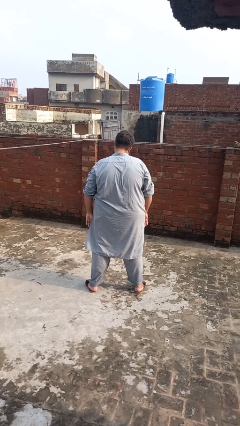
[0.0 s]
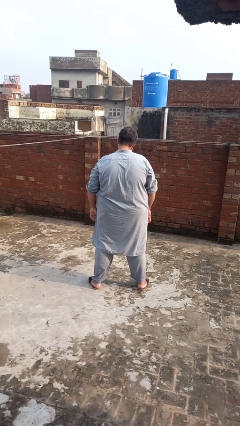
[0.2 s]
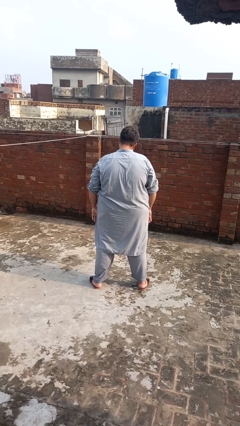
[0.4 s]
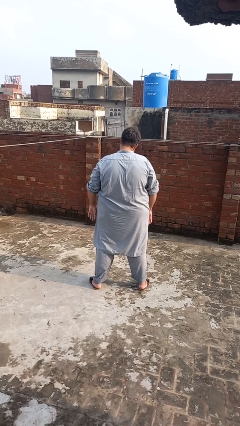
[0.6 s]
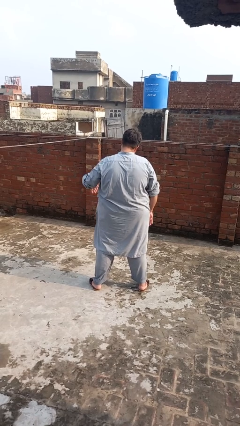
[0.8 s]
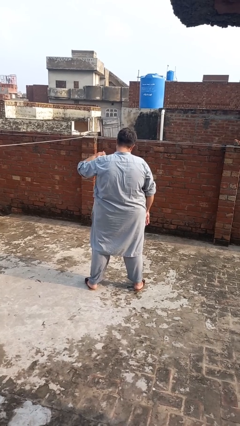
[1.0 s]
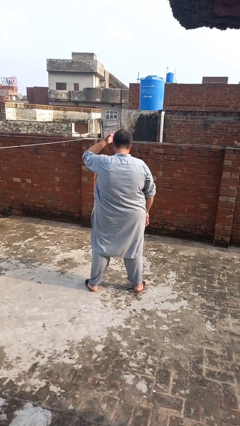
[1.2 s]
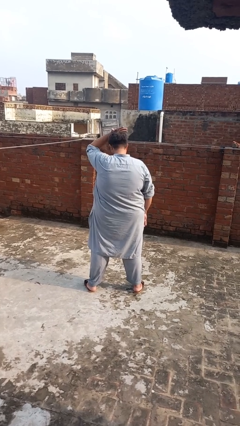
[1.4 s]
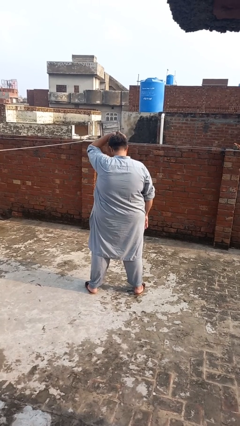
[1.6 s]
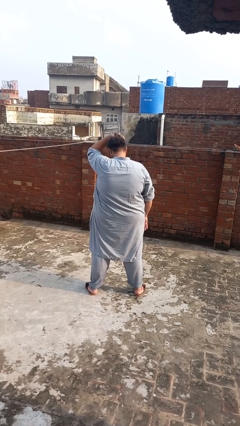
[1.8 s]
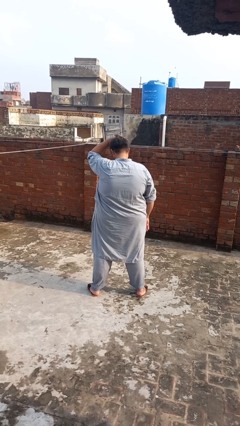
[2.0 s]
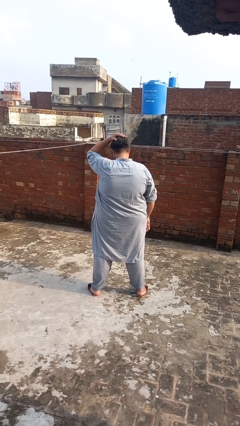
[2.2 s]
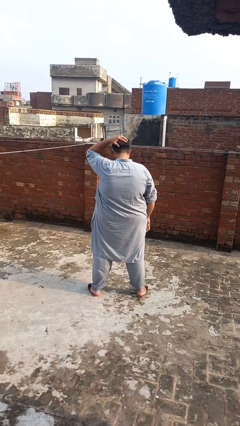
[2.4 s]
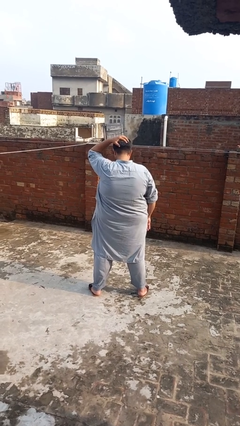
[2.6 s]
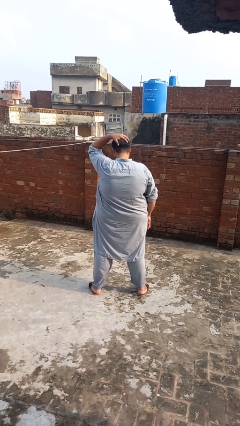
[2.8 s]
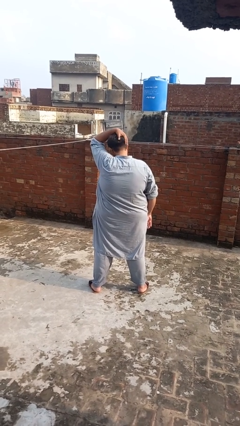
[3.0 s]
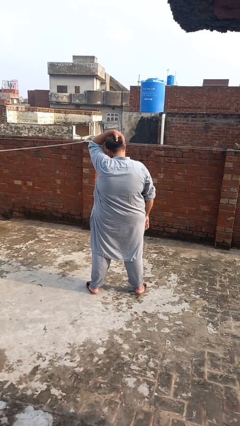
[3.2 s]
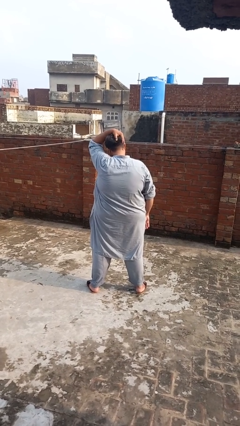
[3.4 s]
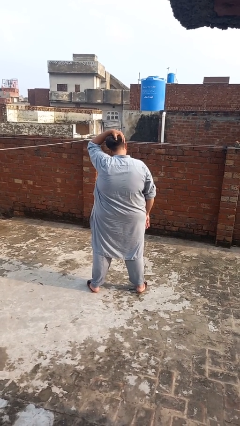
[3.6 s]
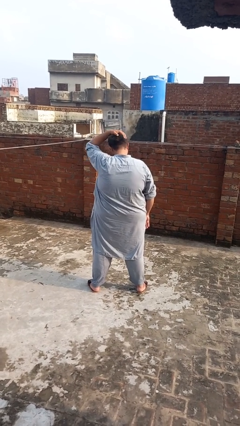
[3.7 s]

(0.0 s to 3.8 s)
person pats head

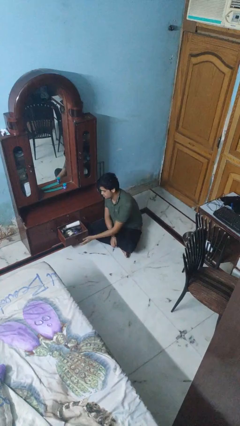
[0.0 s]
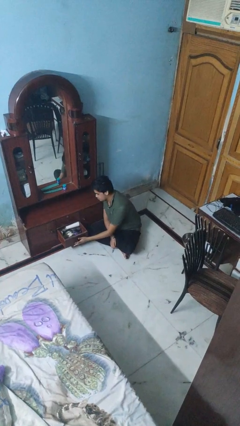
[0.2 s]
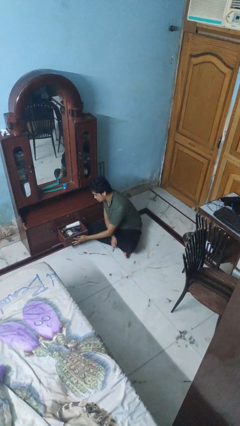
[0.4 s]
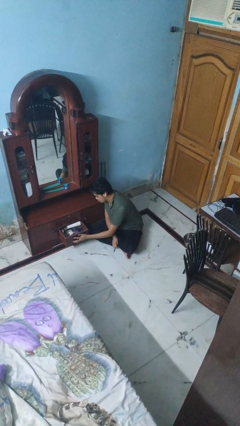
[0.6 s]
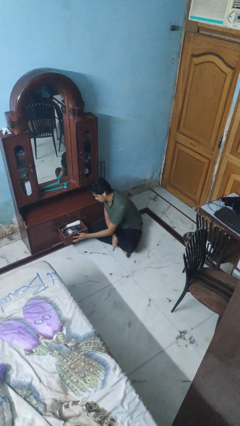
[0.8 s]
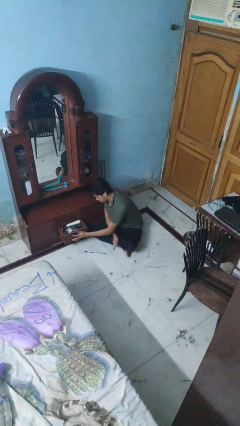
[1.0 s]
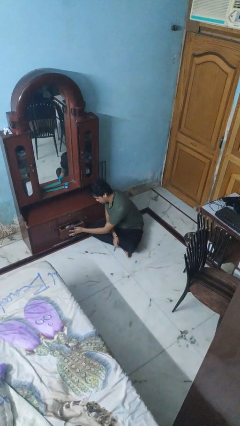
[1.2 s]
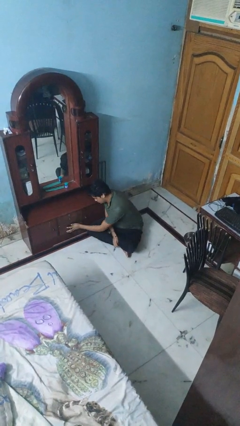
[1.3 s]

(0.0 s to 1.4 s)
person closes dresser drawer

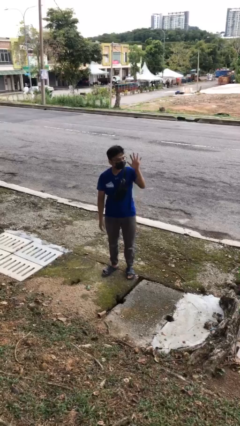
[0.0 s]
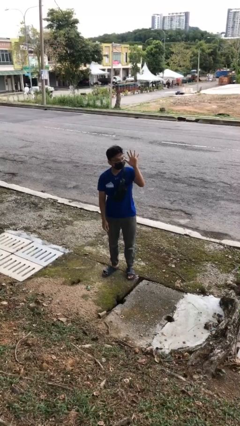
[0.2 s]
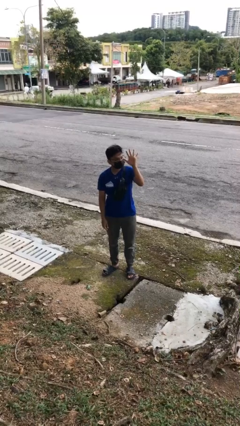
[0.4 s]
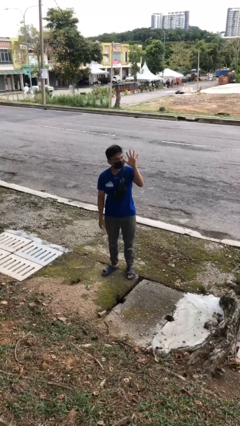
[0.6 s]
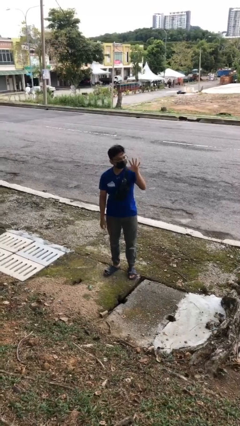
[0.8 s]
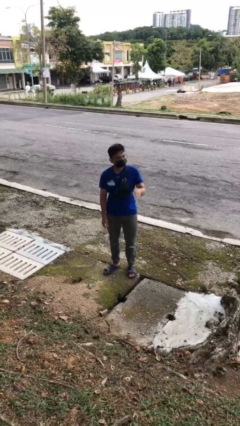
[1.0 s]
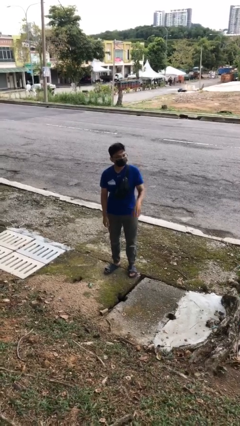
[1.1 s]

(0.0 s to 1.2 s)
person gestures number five

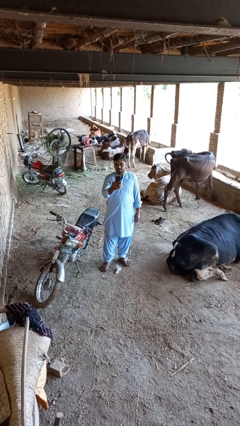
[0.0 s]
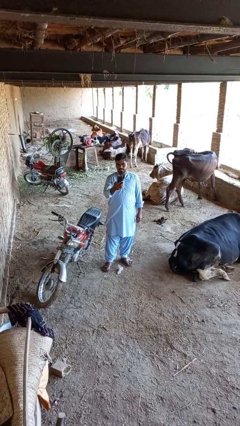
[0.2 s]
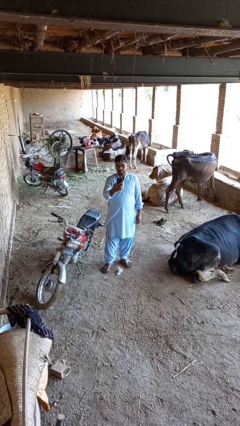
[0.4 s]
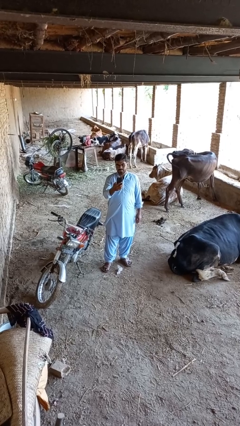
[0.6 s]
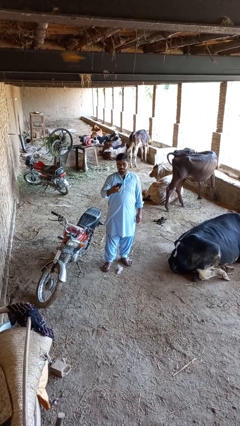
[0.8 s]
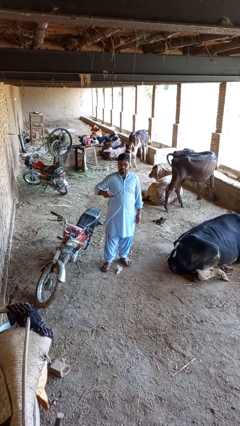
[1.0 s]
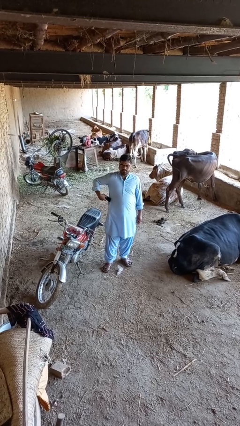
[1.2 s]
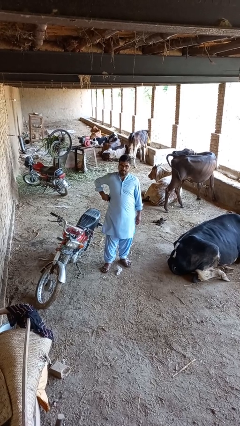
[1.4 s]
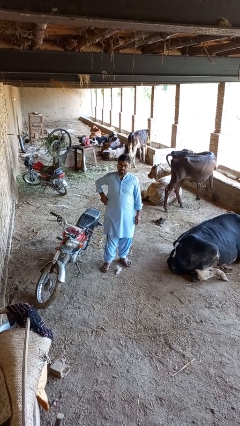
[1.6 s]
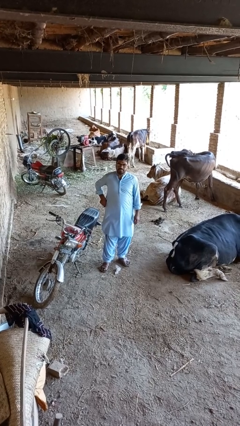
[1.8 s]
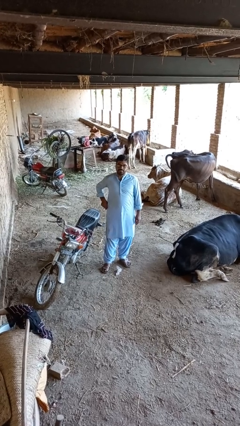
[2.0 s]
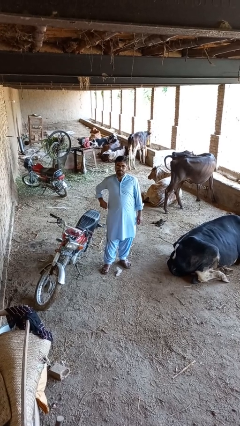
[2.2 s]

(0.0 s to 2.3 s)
person puts phone into pocket

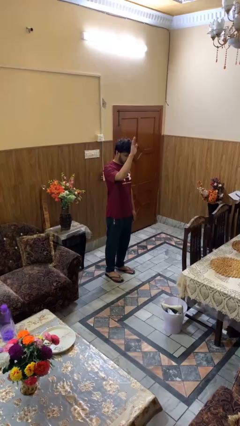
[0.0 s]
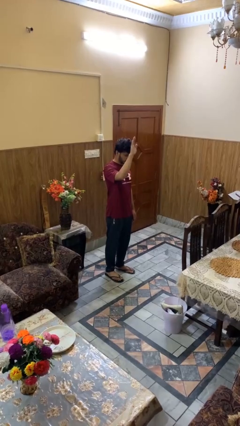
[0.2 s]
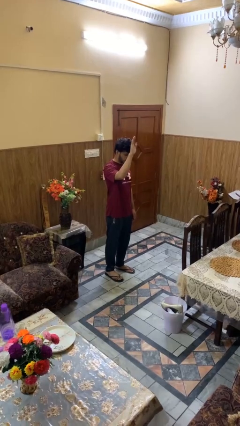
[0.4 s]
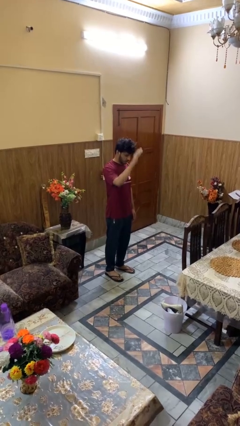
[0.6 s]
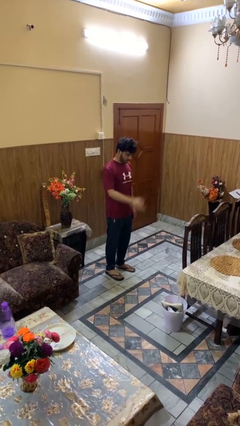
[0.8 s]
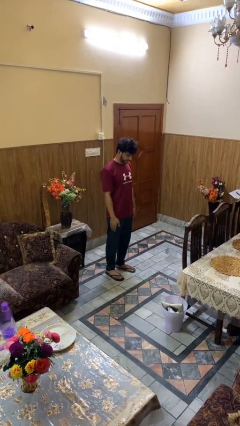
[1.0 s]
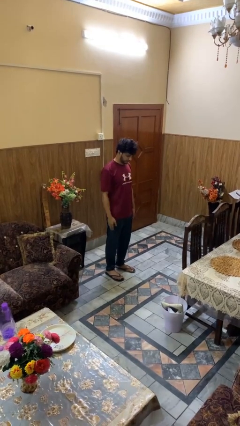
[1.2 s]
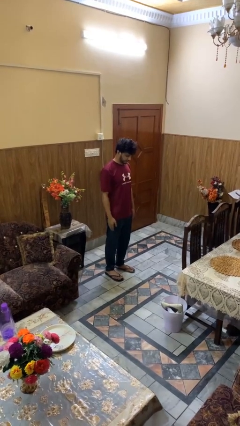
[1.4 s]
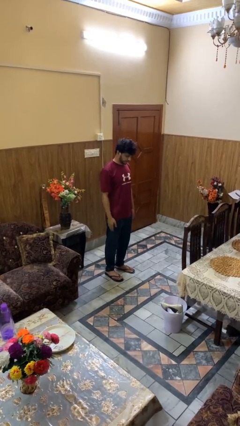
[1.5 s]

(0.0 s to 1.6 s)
person gestures lower hand

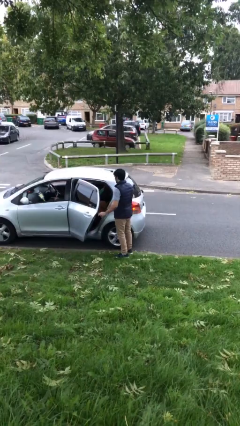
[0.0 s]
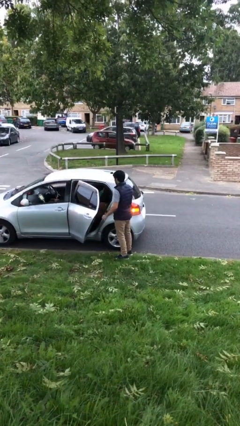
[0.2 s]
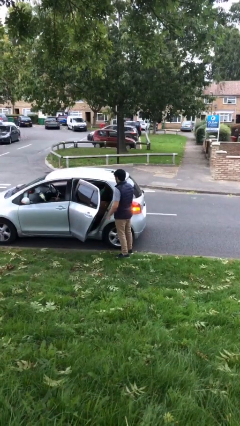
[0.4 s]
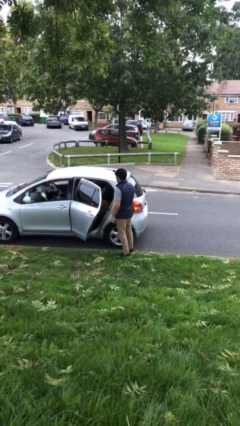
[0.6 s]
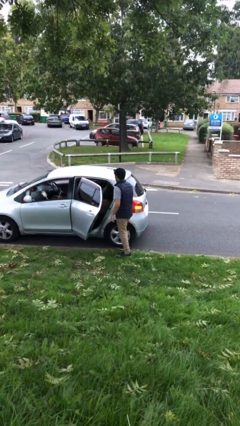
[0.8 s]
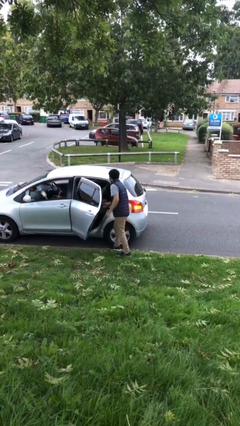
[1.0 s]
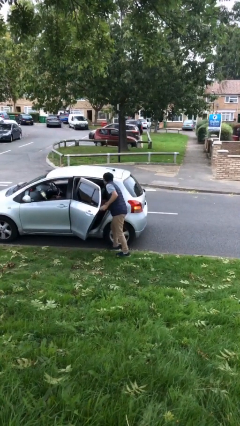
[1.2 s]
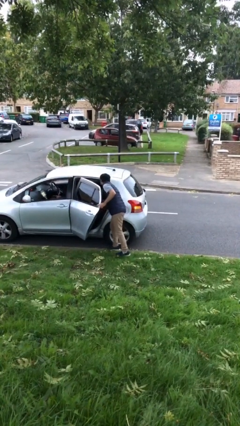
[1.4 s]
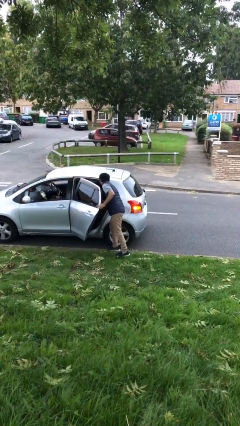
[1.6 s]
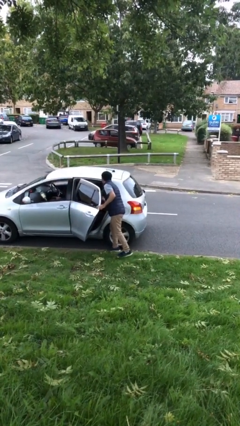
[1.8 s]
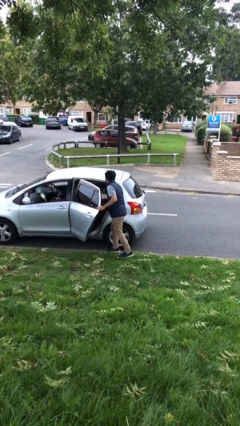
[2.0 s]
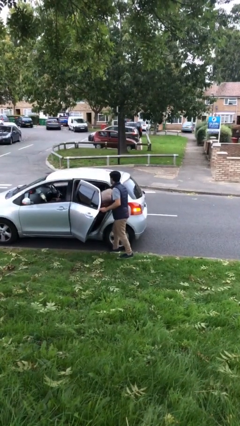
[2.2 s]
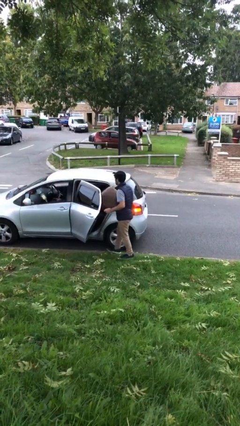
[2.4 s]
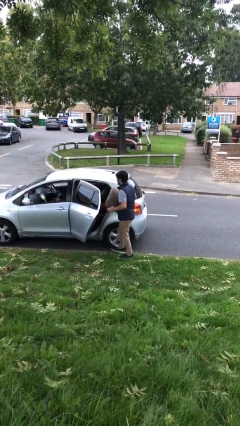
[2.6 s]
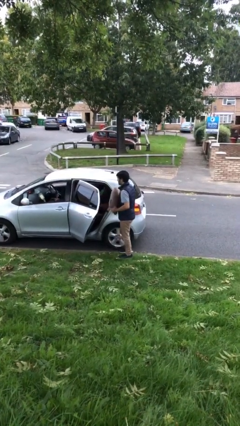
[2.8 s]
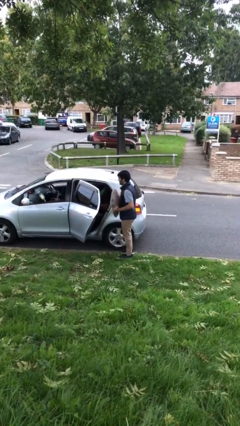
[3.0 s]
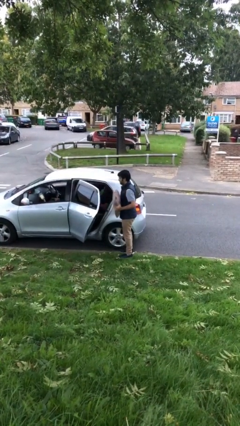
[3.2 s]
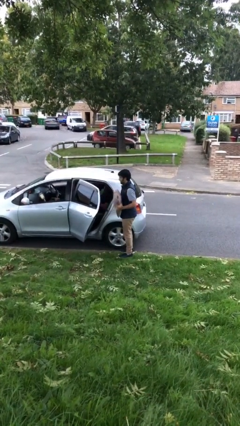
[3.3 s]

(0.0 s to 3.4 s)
person unloads car

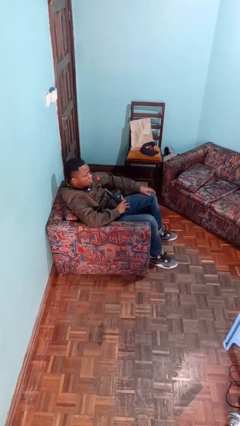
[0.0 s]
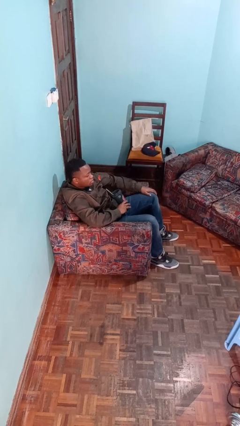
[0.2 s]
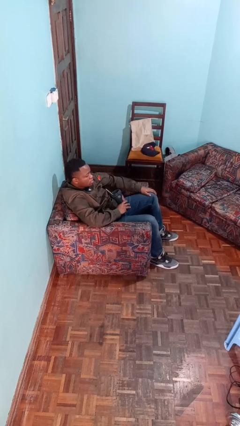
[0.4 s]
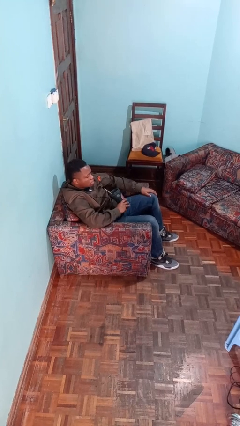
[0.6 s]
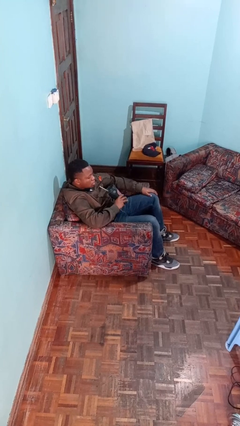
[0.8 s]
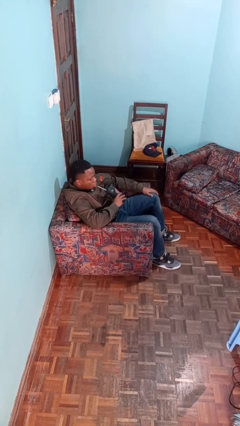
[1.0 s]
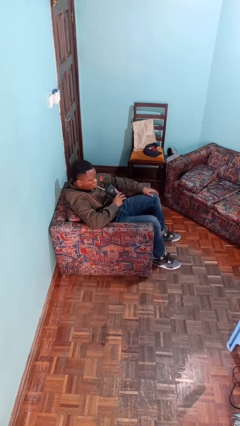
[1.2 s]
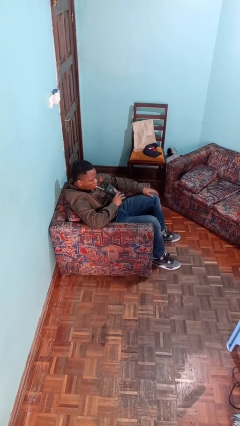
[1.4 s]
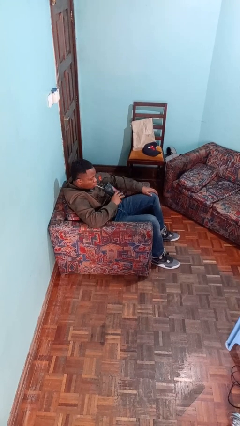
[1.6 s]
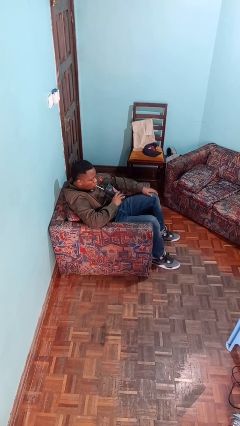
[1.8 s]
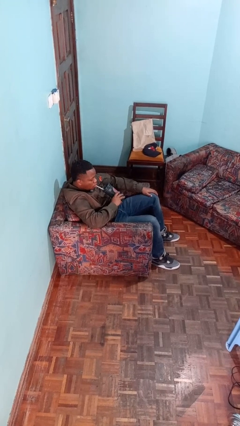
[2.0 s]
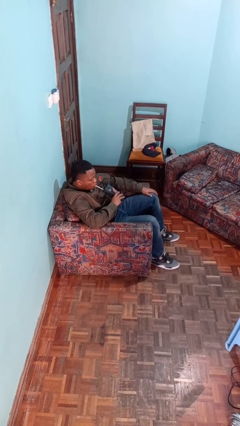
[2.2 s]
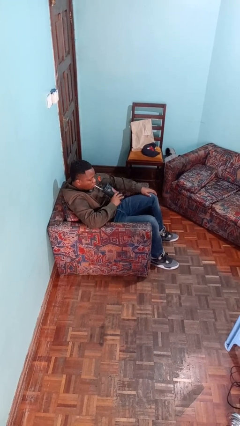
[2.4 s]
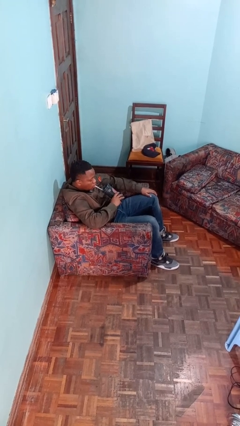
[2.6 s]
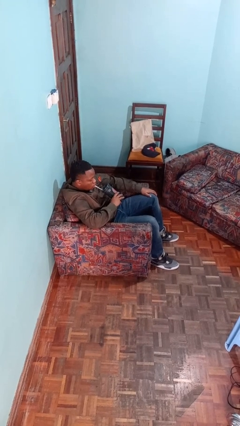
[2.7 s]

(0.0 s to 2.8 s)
person drinks from straw

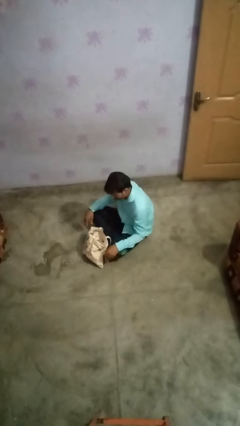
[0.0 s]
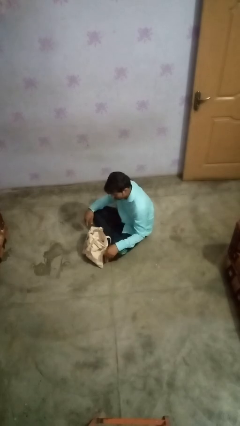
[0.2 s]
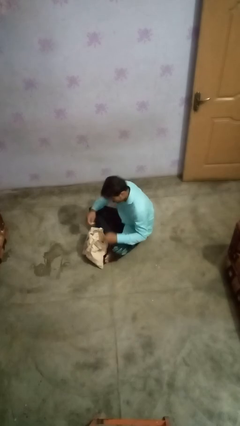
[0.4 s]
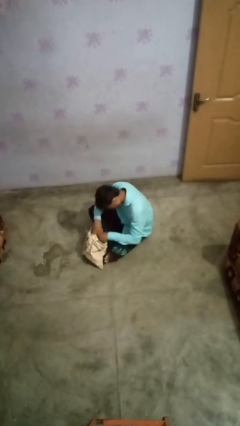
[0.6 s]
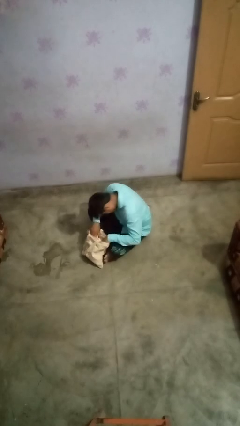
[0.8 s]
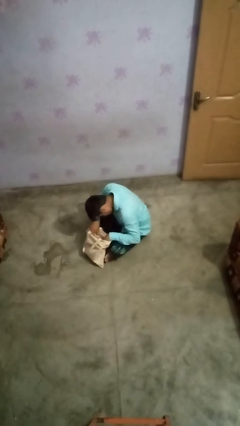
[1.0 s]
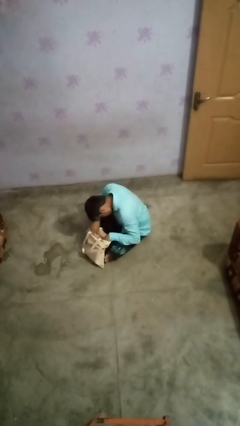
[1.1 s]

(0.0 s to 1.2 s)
person searches in bag
